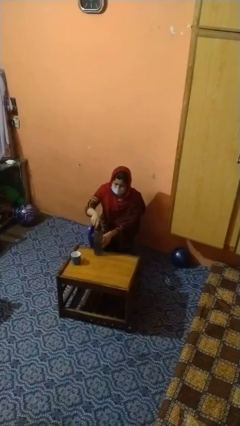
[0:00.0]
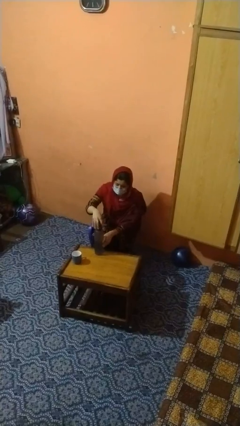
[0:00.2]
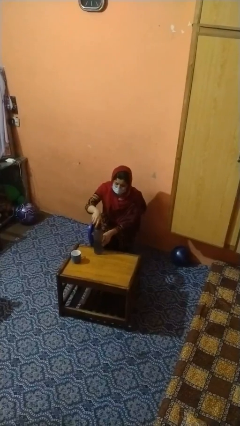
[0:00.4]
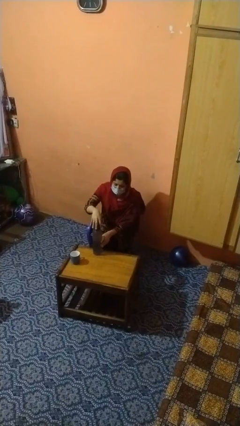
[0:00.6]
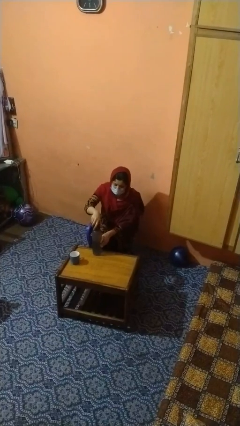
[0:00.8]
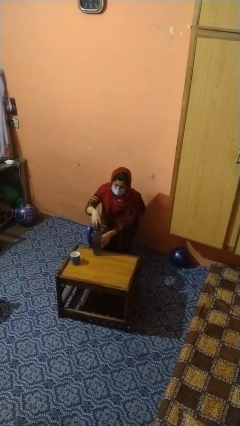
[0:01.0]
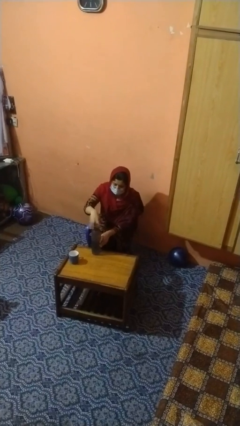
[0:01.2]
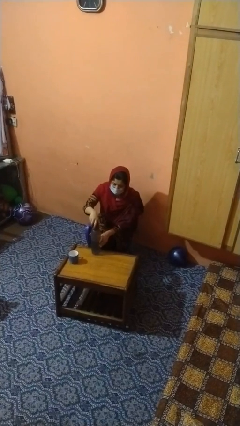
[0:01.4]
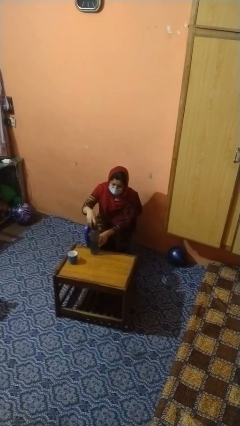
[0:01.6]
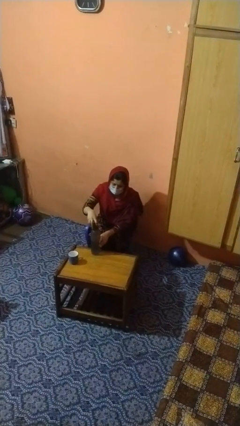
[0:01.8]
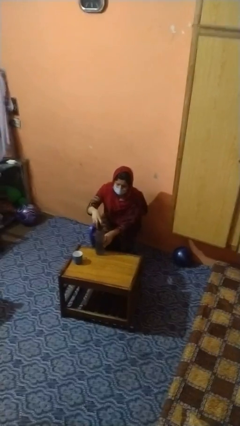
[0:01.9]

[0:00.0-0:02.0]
person unscrews lid from bottle

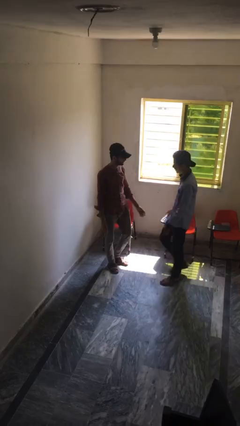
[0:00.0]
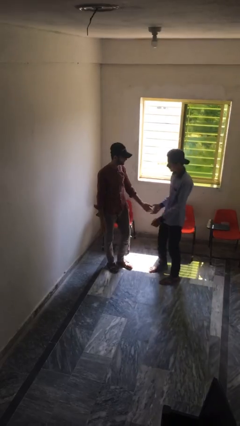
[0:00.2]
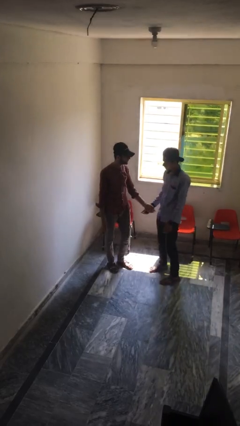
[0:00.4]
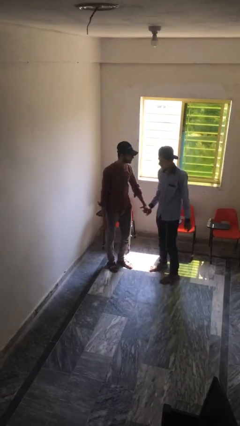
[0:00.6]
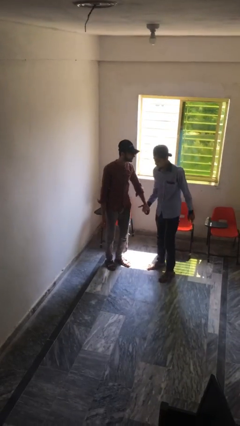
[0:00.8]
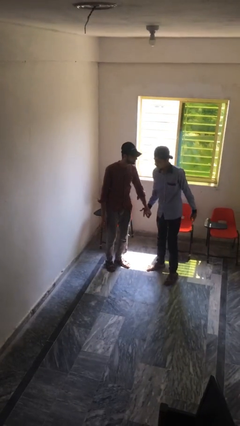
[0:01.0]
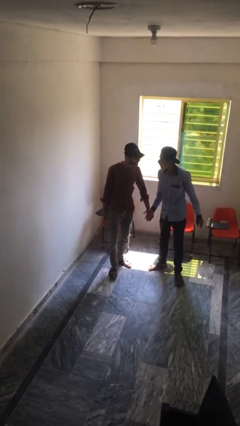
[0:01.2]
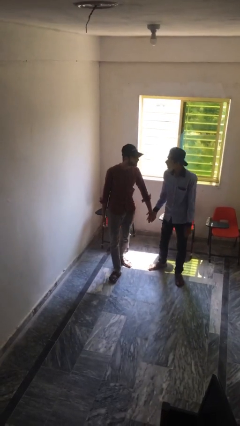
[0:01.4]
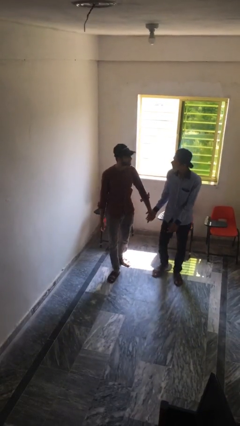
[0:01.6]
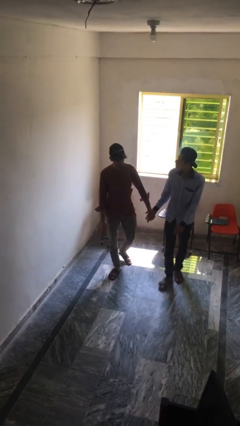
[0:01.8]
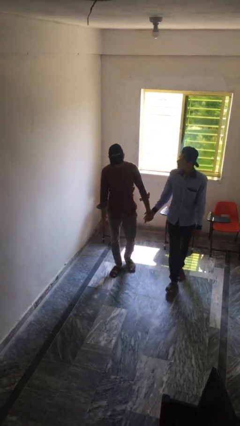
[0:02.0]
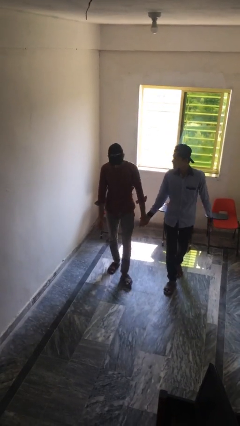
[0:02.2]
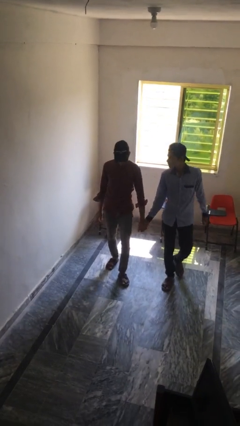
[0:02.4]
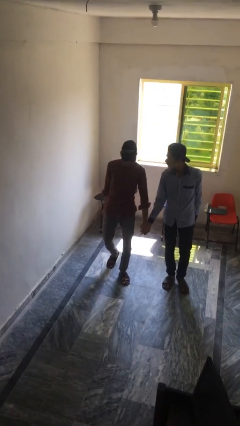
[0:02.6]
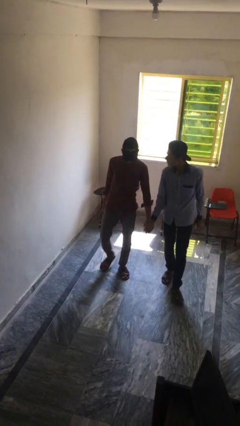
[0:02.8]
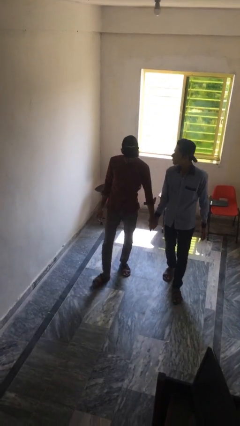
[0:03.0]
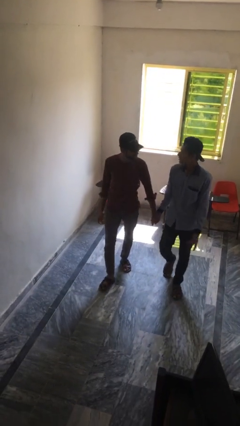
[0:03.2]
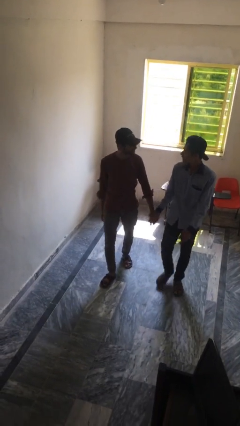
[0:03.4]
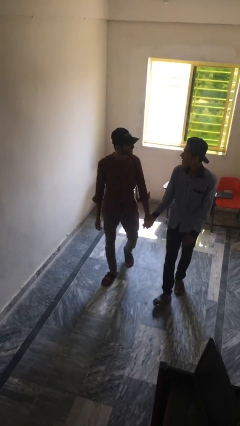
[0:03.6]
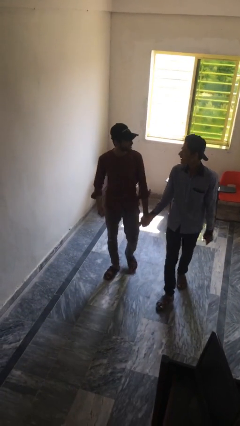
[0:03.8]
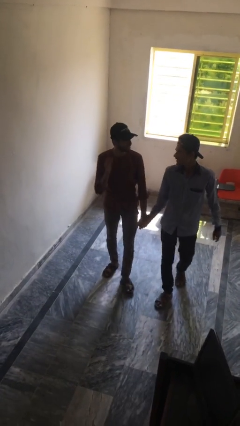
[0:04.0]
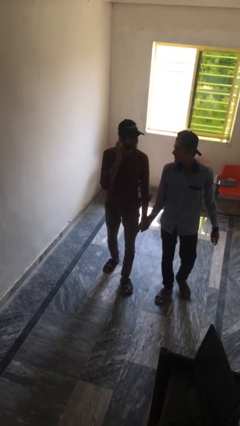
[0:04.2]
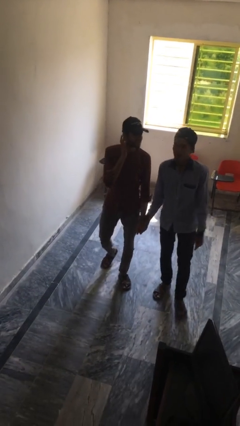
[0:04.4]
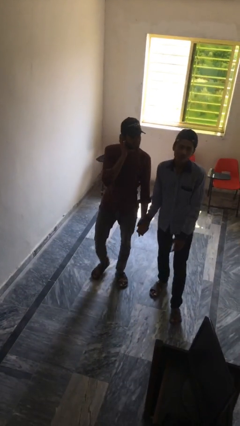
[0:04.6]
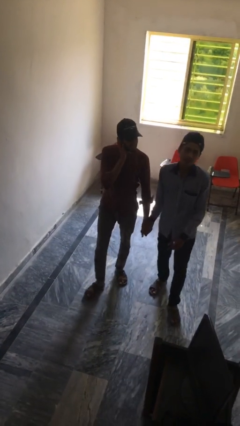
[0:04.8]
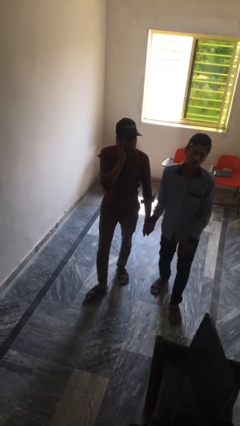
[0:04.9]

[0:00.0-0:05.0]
person holds hand

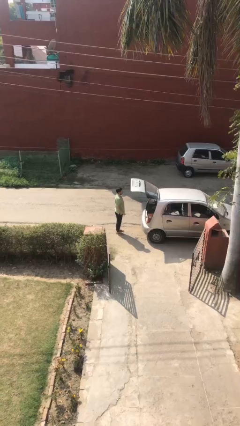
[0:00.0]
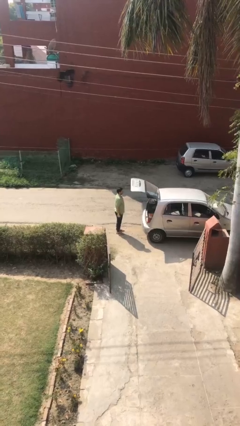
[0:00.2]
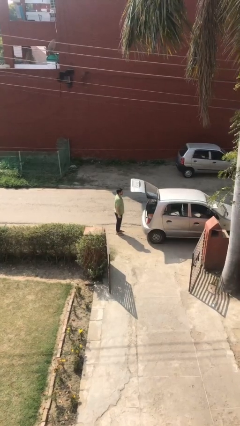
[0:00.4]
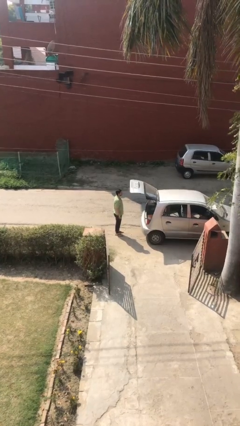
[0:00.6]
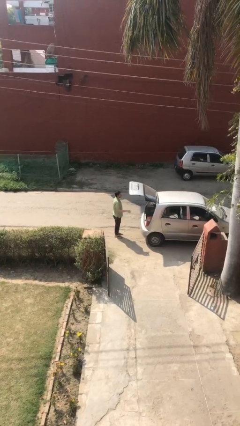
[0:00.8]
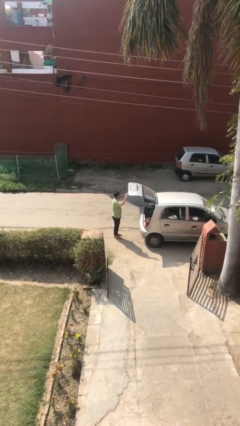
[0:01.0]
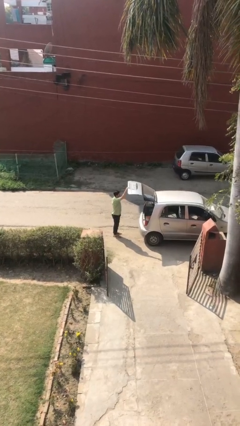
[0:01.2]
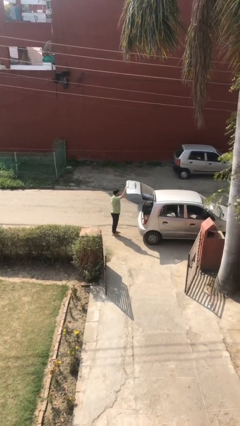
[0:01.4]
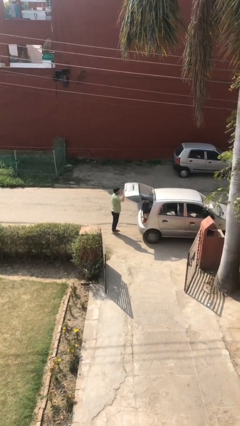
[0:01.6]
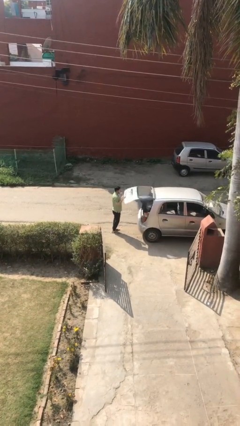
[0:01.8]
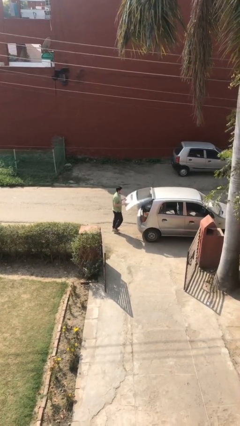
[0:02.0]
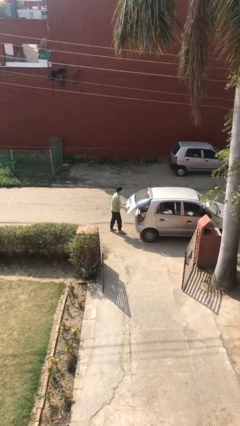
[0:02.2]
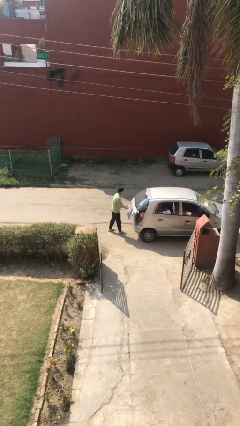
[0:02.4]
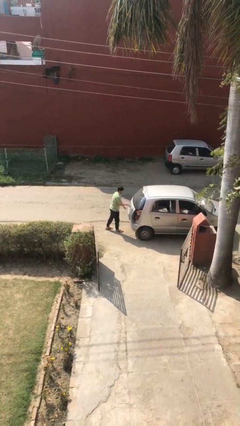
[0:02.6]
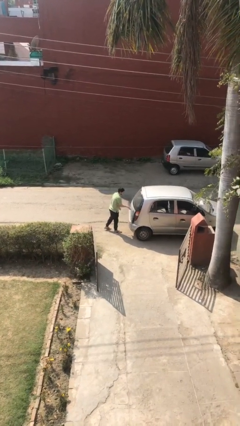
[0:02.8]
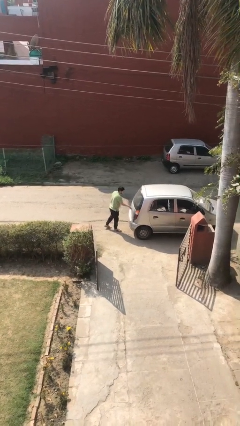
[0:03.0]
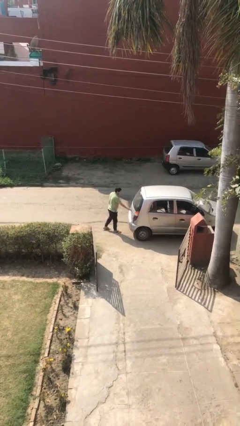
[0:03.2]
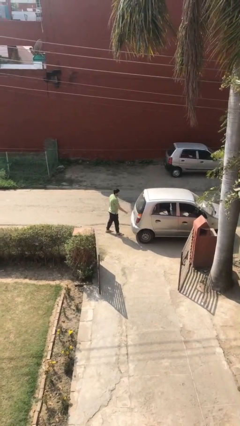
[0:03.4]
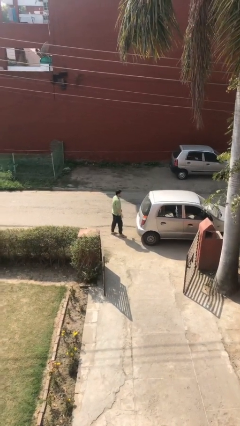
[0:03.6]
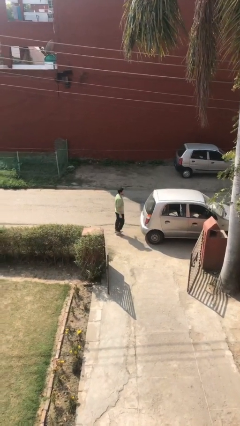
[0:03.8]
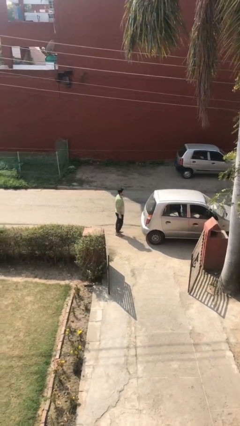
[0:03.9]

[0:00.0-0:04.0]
person closes car trunk

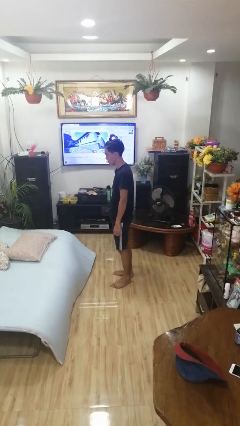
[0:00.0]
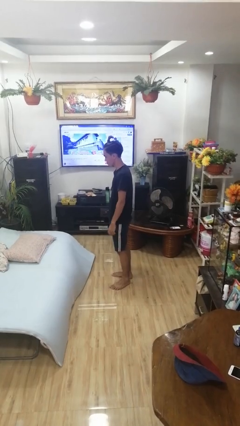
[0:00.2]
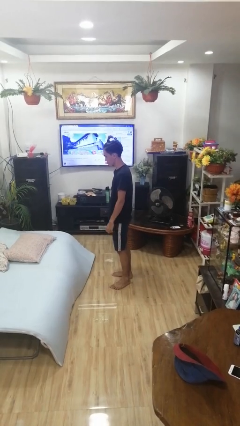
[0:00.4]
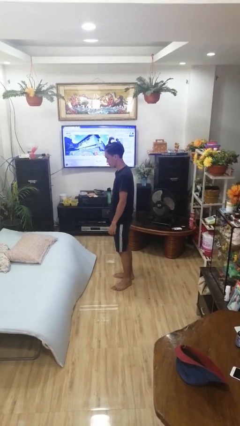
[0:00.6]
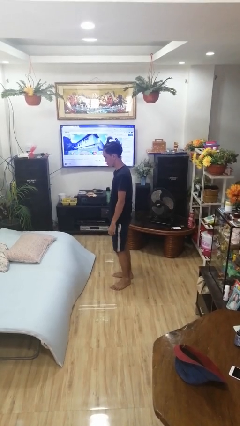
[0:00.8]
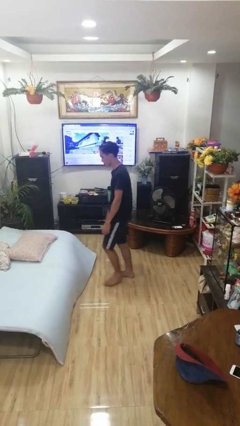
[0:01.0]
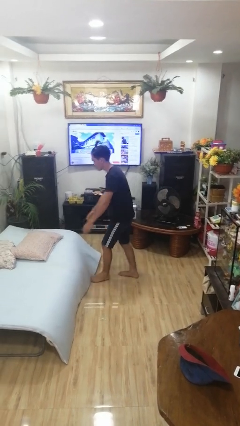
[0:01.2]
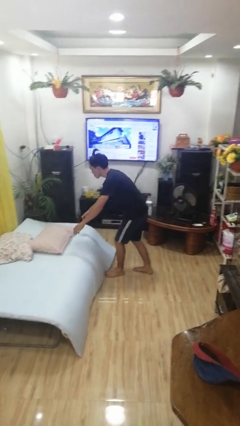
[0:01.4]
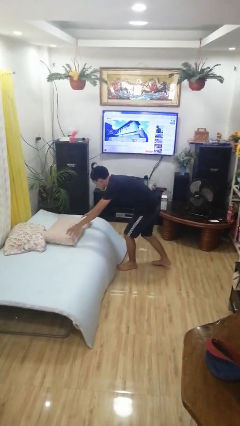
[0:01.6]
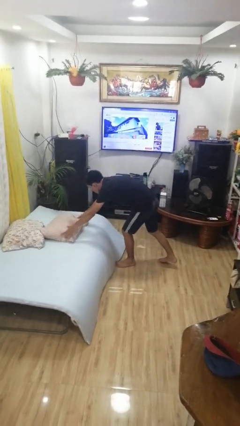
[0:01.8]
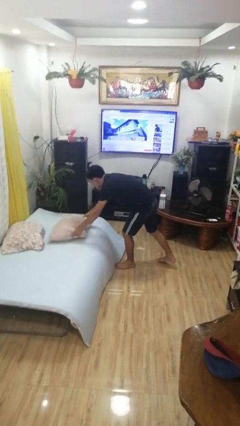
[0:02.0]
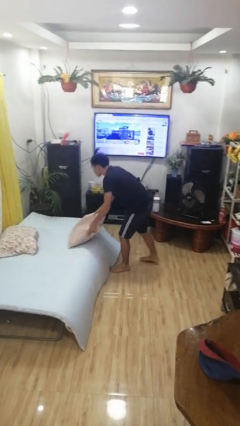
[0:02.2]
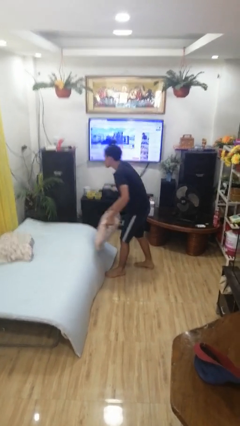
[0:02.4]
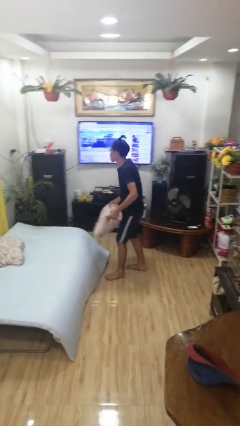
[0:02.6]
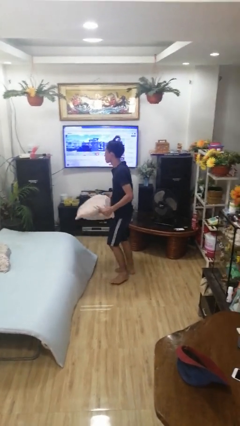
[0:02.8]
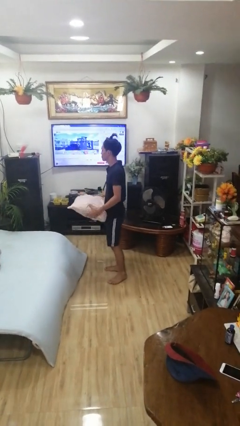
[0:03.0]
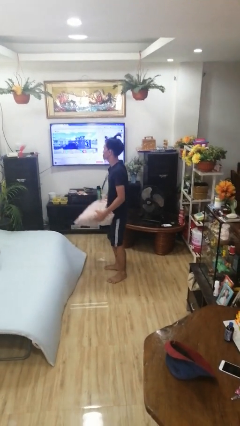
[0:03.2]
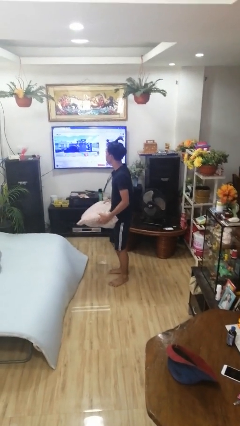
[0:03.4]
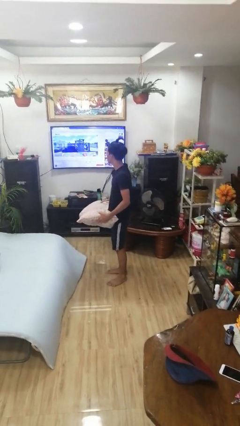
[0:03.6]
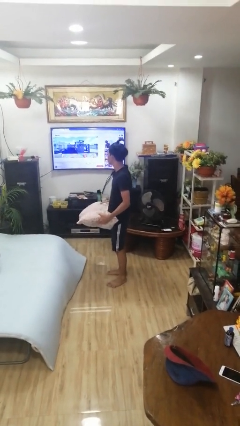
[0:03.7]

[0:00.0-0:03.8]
person picks up object from bed

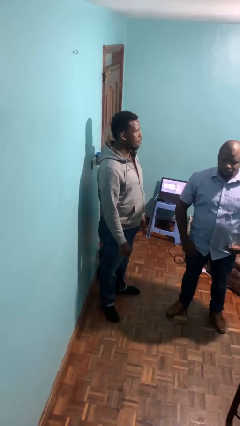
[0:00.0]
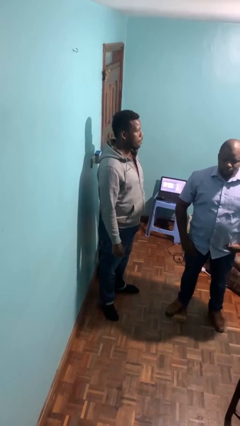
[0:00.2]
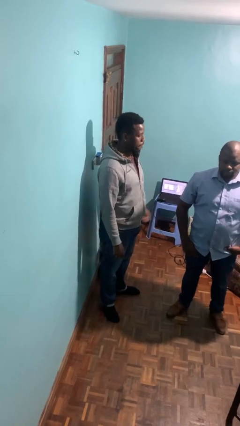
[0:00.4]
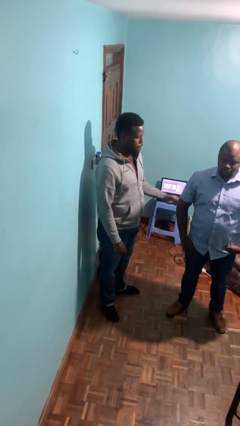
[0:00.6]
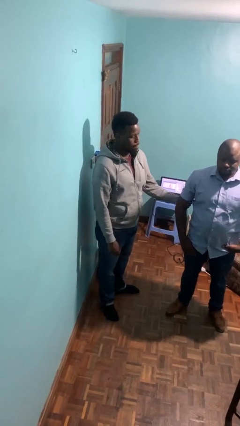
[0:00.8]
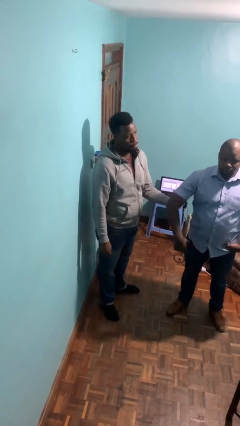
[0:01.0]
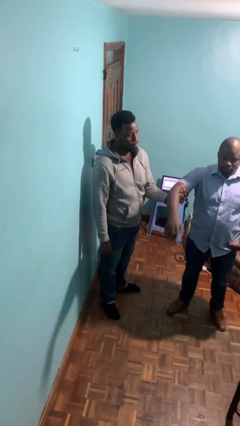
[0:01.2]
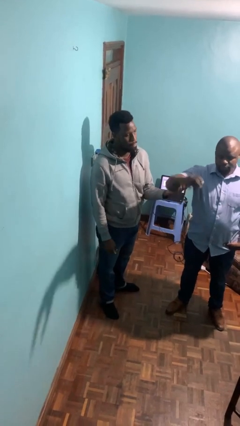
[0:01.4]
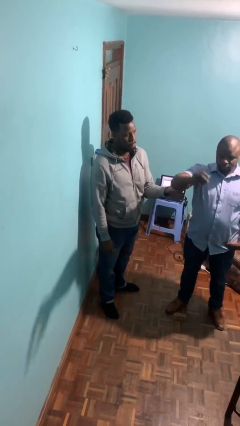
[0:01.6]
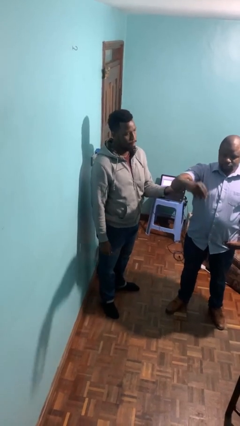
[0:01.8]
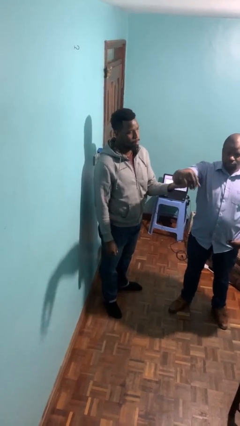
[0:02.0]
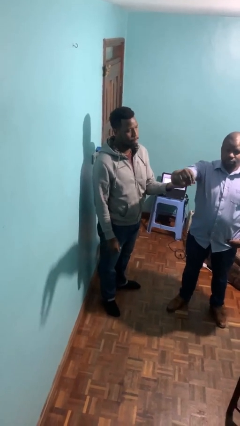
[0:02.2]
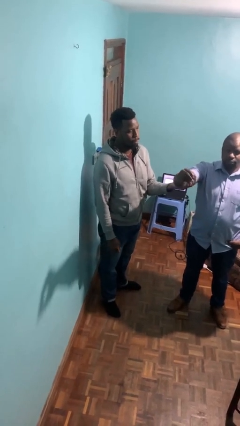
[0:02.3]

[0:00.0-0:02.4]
person grabs person by bicep

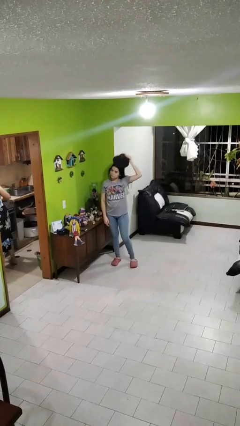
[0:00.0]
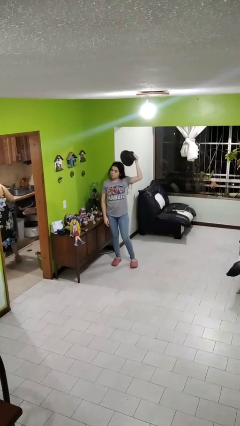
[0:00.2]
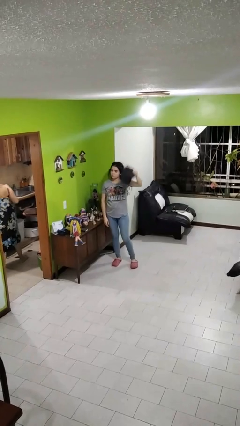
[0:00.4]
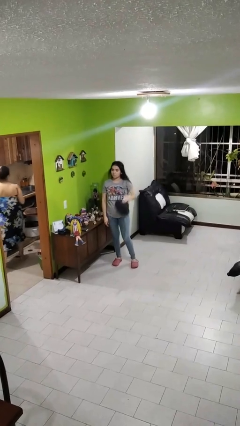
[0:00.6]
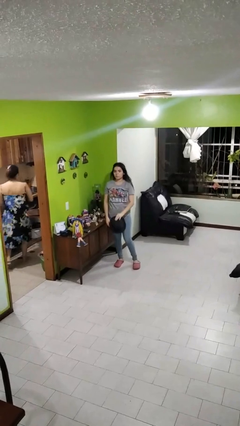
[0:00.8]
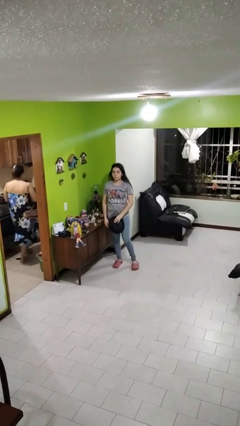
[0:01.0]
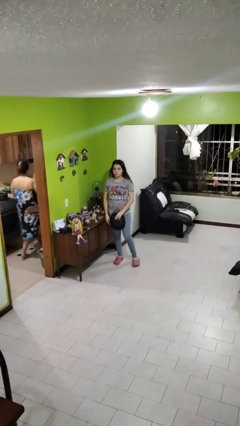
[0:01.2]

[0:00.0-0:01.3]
person takes off hat
